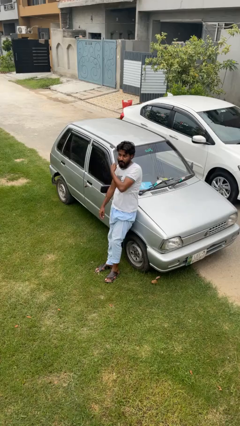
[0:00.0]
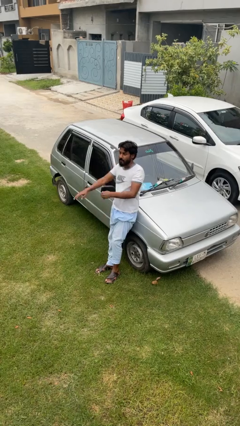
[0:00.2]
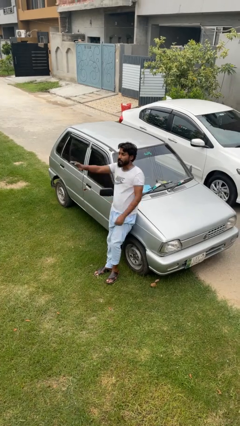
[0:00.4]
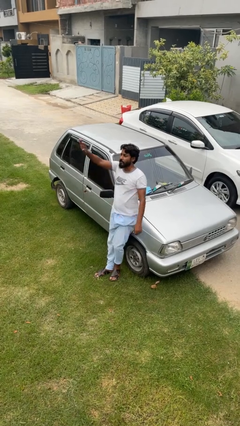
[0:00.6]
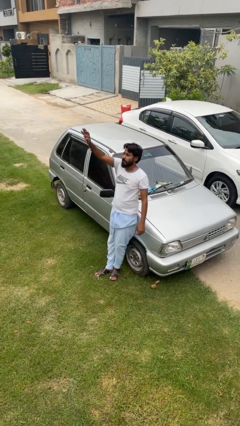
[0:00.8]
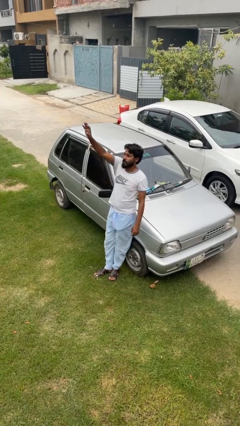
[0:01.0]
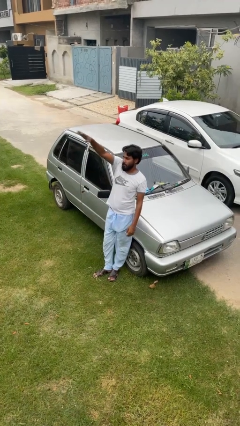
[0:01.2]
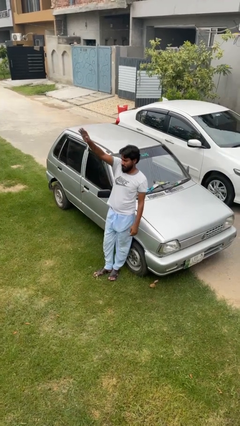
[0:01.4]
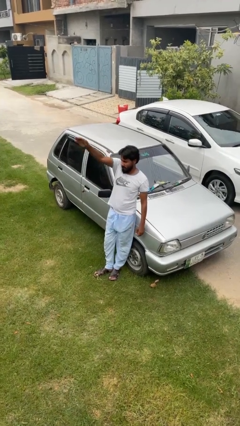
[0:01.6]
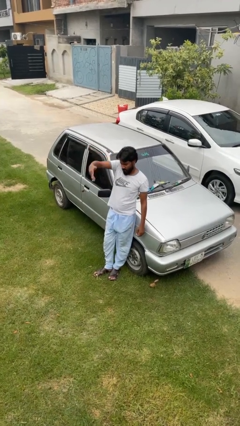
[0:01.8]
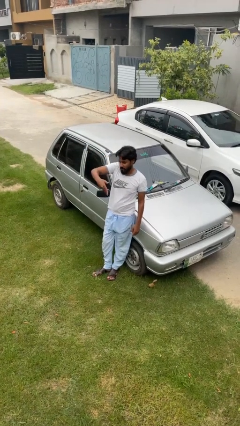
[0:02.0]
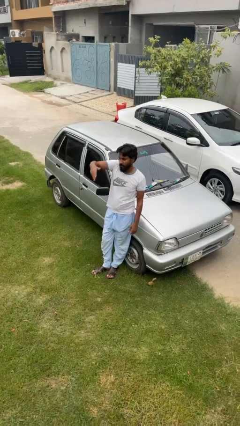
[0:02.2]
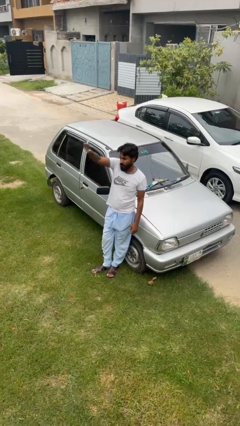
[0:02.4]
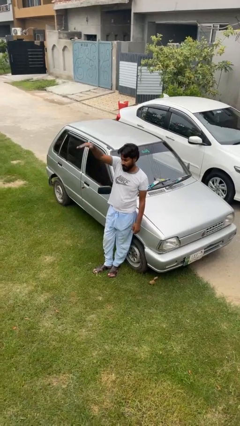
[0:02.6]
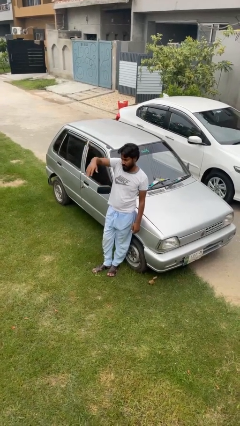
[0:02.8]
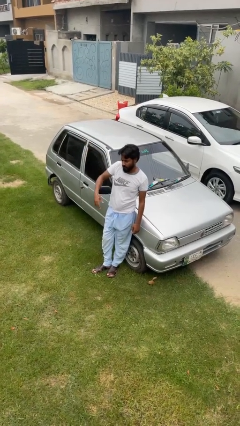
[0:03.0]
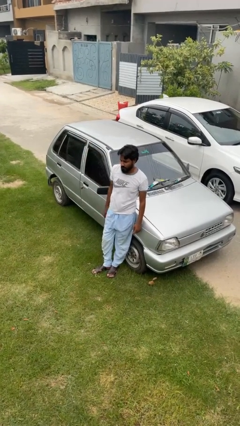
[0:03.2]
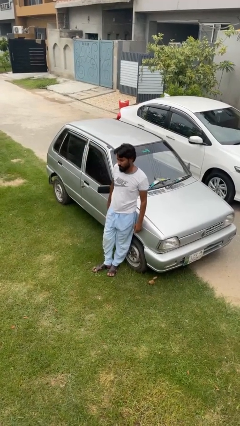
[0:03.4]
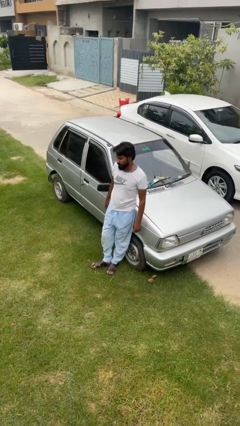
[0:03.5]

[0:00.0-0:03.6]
person gestures come here

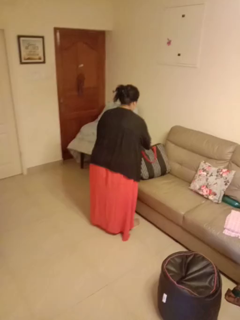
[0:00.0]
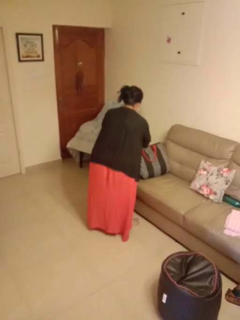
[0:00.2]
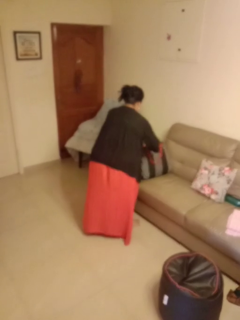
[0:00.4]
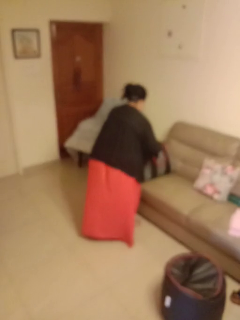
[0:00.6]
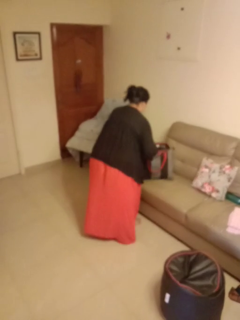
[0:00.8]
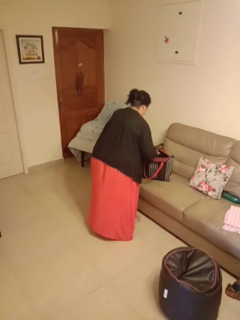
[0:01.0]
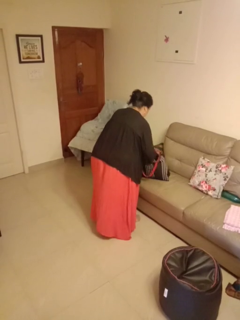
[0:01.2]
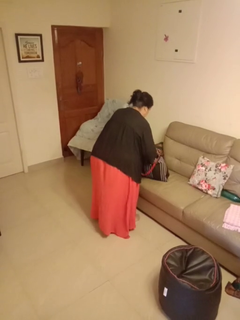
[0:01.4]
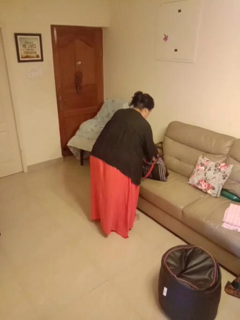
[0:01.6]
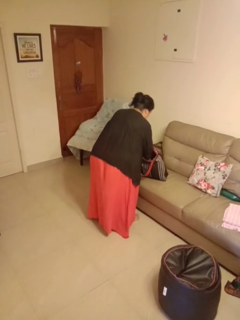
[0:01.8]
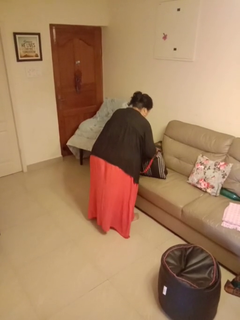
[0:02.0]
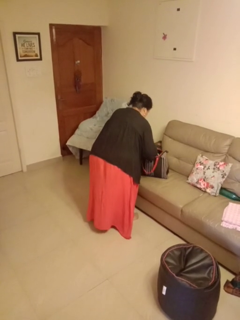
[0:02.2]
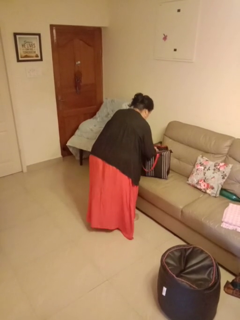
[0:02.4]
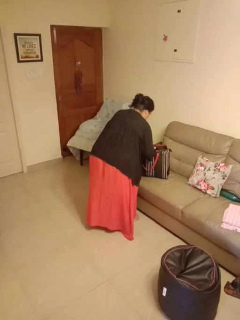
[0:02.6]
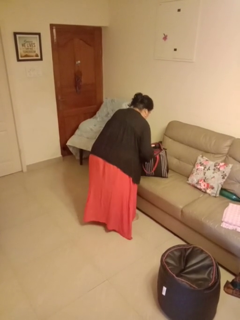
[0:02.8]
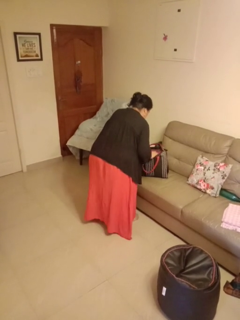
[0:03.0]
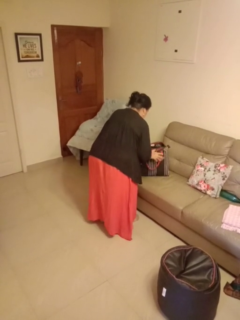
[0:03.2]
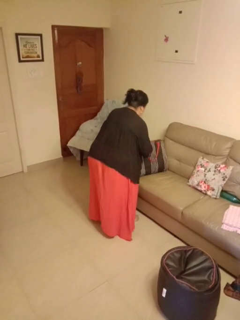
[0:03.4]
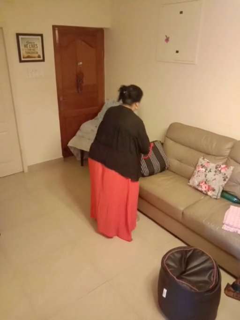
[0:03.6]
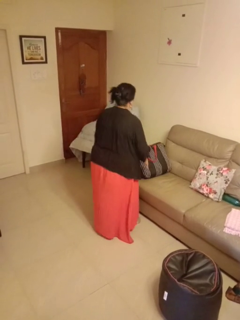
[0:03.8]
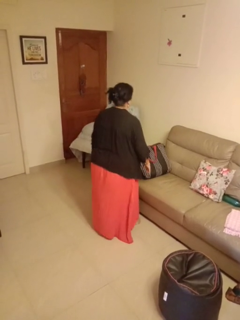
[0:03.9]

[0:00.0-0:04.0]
person searches in bag

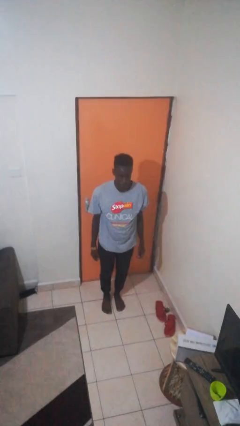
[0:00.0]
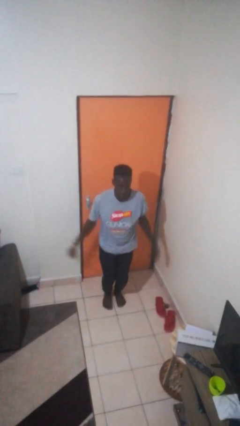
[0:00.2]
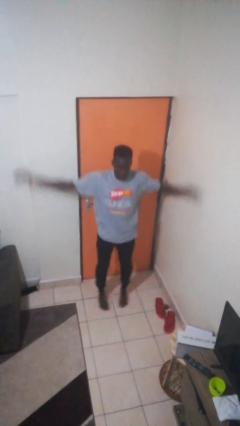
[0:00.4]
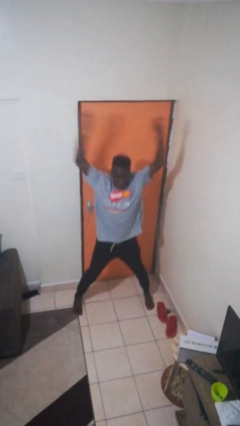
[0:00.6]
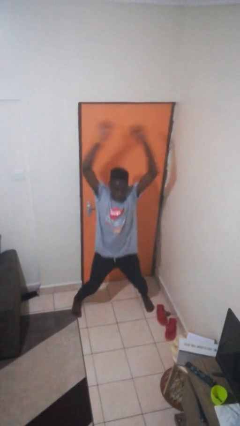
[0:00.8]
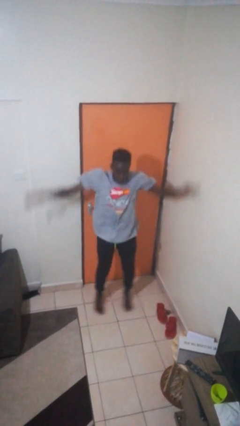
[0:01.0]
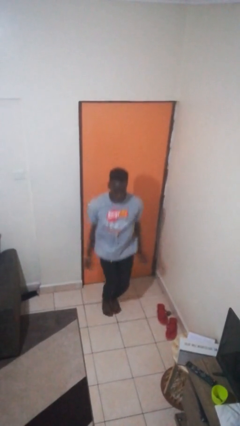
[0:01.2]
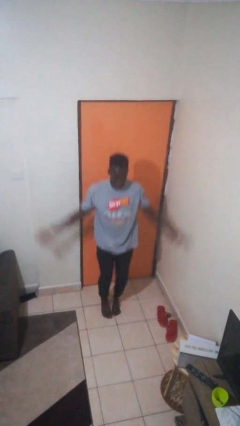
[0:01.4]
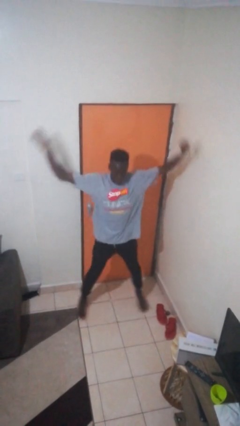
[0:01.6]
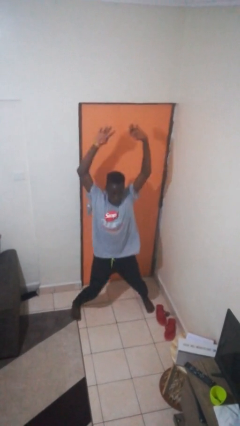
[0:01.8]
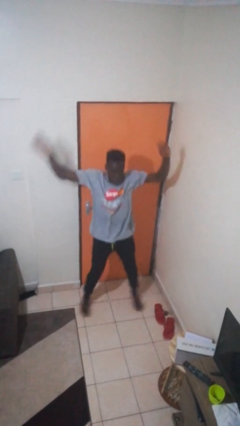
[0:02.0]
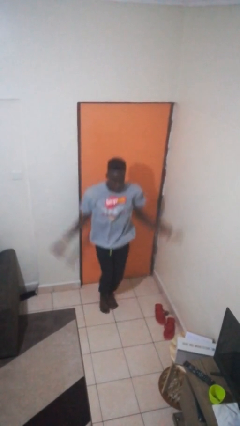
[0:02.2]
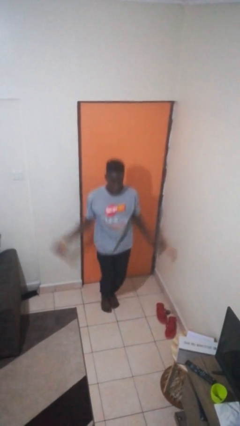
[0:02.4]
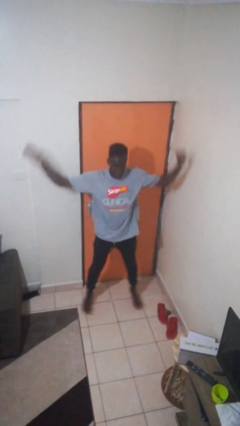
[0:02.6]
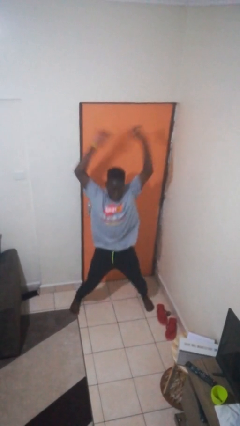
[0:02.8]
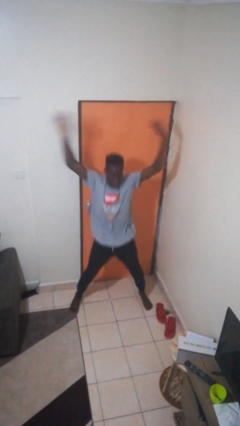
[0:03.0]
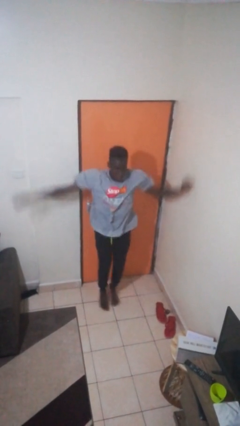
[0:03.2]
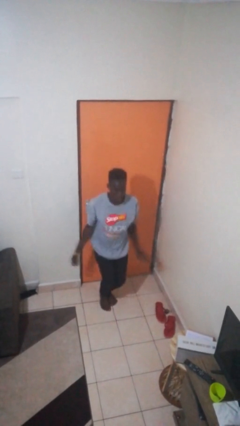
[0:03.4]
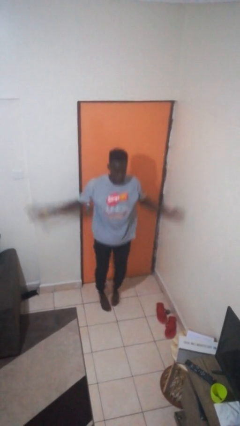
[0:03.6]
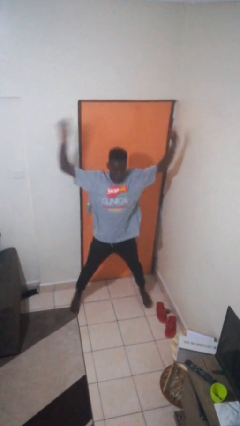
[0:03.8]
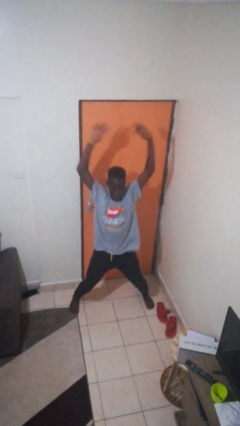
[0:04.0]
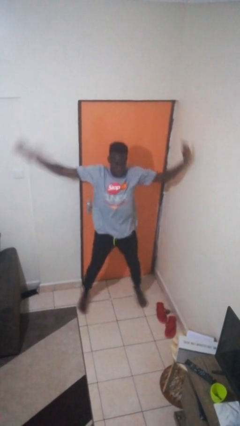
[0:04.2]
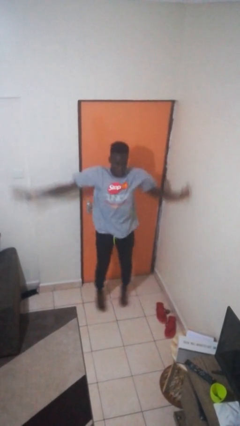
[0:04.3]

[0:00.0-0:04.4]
person exercises with jumping jacks

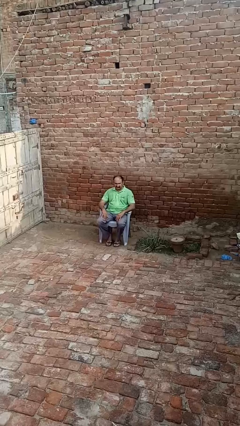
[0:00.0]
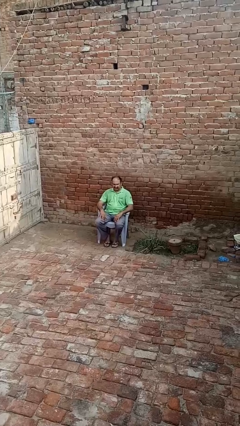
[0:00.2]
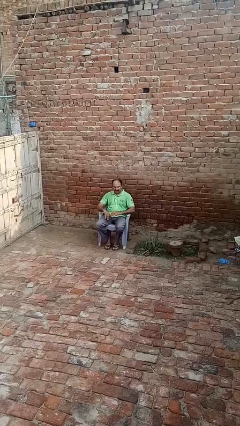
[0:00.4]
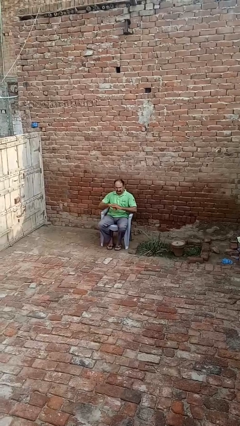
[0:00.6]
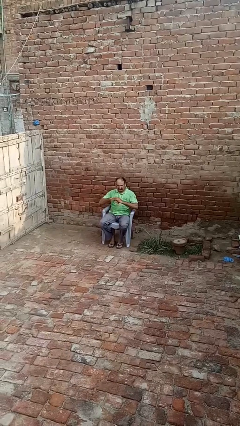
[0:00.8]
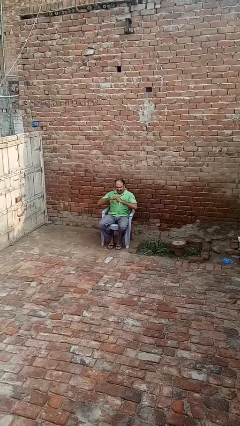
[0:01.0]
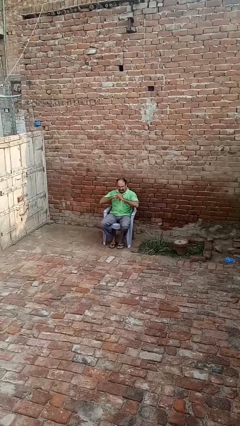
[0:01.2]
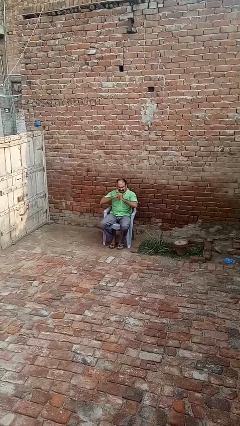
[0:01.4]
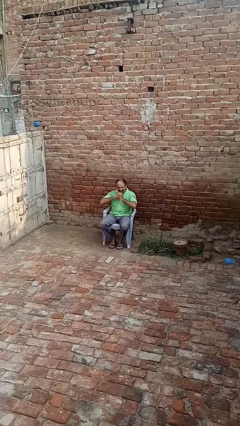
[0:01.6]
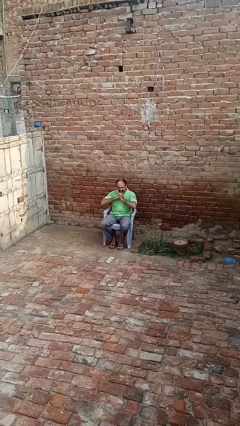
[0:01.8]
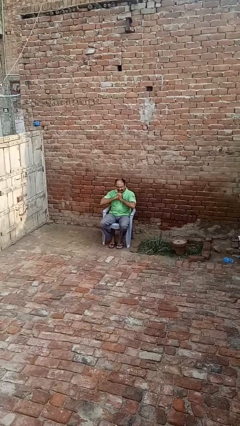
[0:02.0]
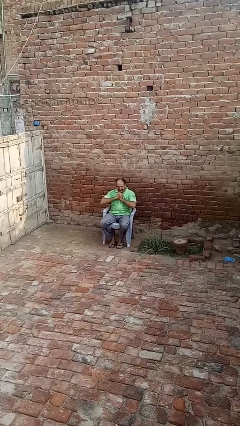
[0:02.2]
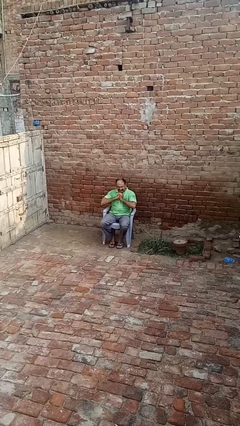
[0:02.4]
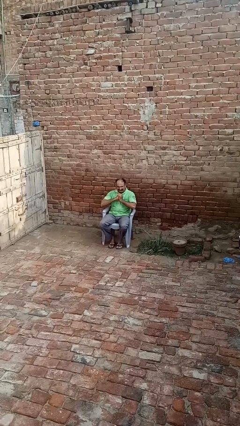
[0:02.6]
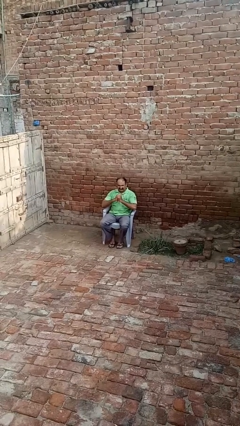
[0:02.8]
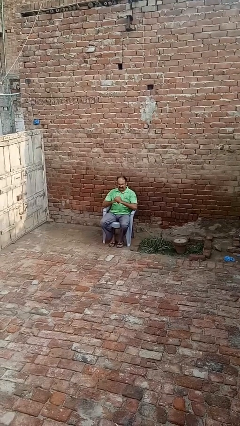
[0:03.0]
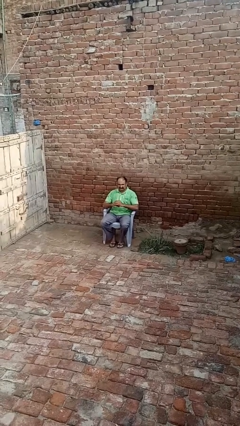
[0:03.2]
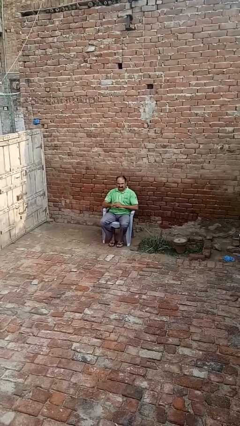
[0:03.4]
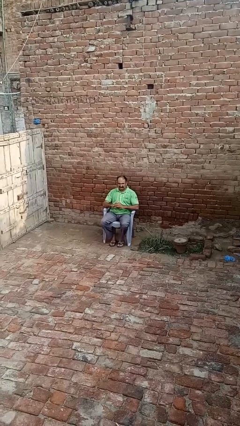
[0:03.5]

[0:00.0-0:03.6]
person cracks knuckles

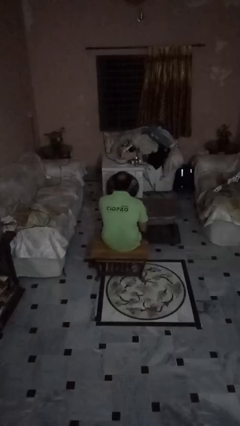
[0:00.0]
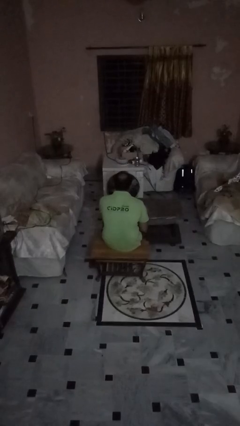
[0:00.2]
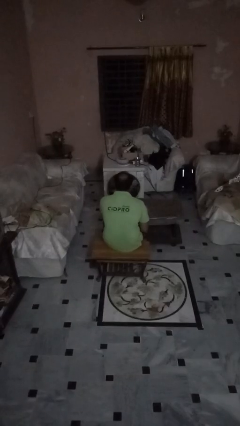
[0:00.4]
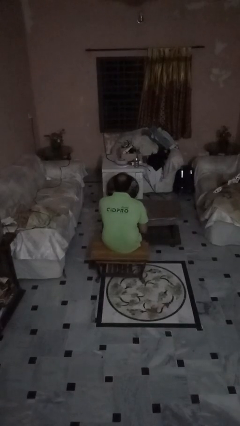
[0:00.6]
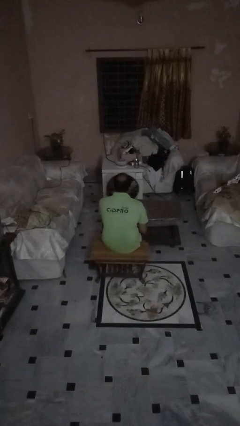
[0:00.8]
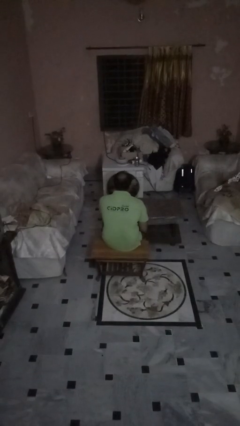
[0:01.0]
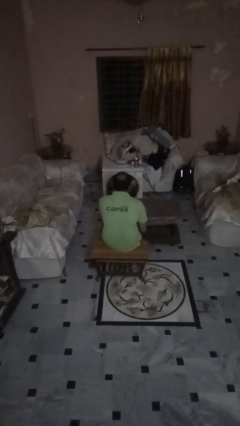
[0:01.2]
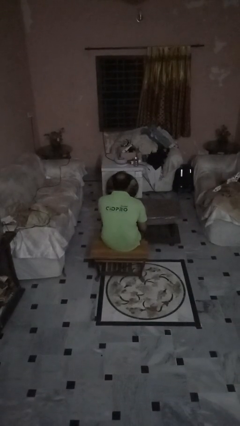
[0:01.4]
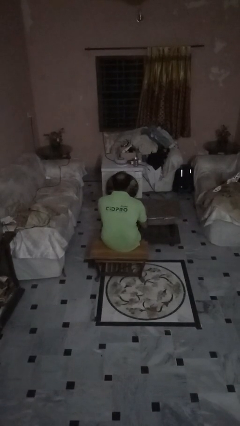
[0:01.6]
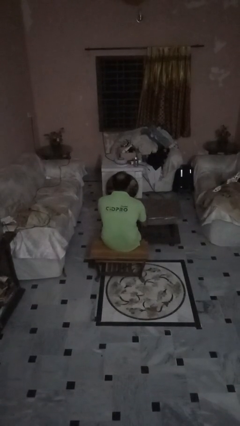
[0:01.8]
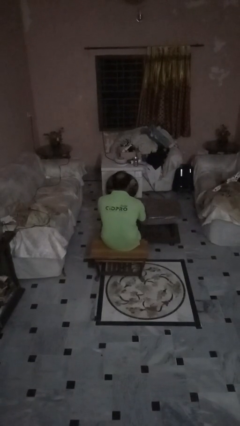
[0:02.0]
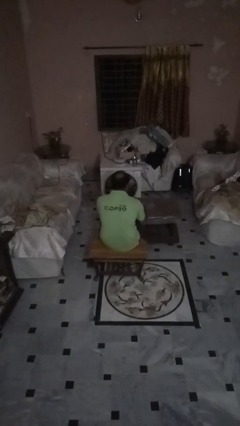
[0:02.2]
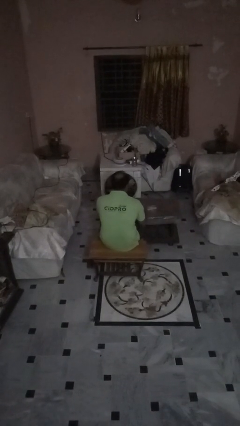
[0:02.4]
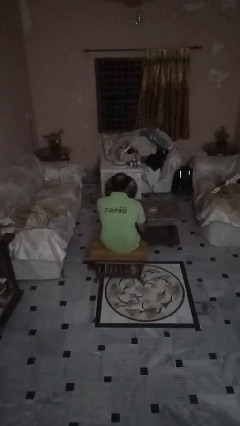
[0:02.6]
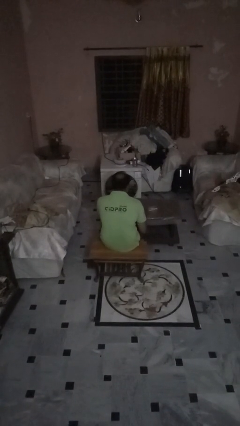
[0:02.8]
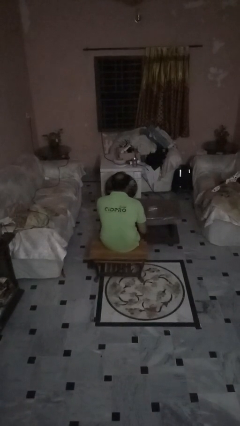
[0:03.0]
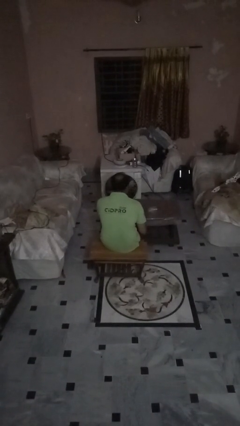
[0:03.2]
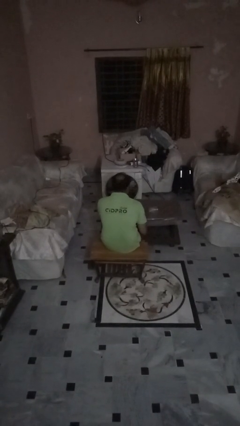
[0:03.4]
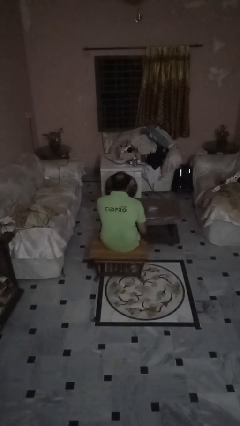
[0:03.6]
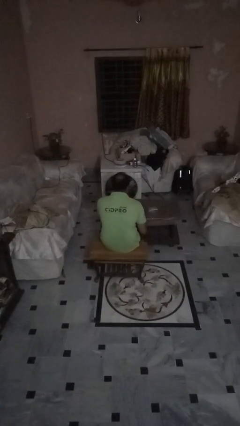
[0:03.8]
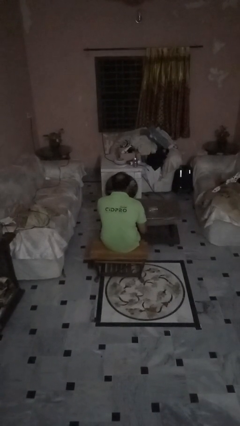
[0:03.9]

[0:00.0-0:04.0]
person knocks over glass
